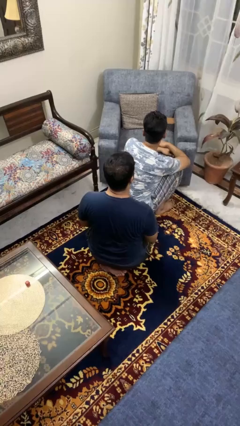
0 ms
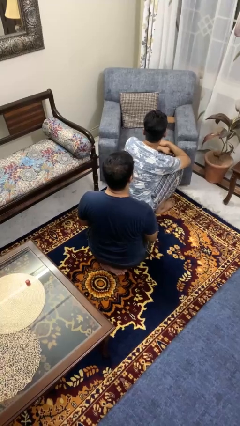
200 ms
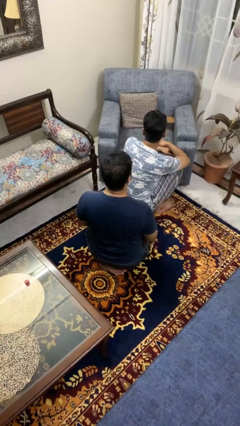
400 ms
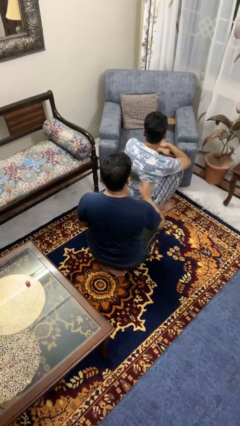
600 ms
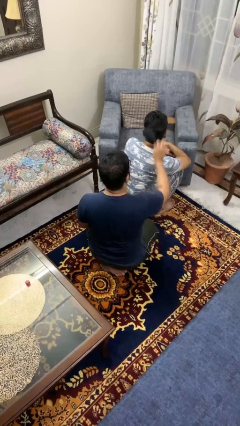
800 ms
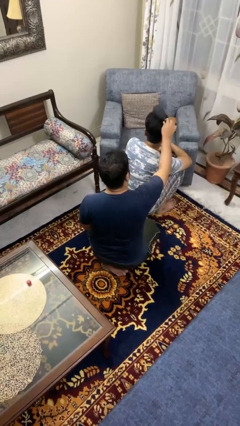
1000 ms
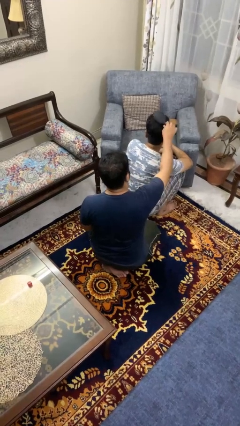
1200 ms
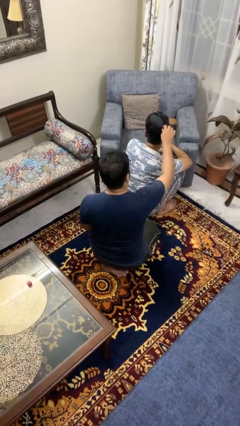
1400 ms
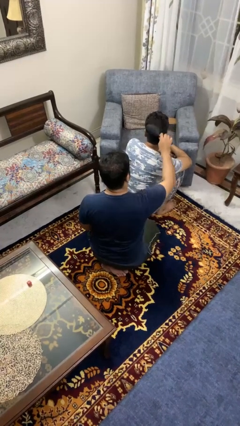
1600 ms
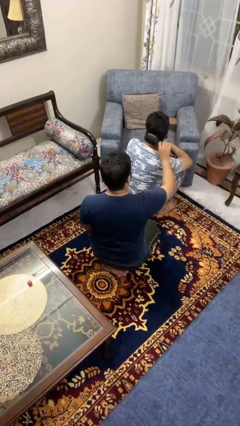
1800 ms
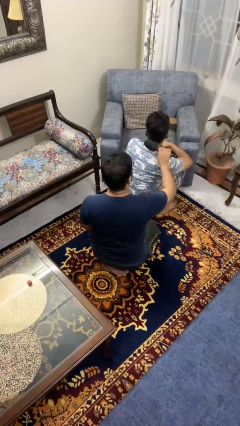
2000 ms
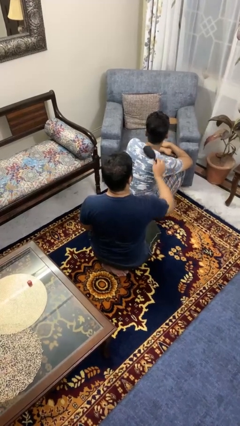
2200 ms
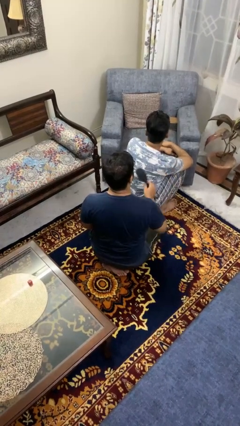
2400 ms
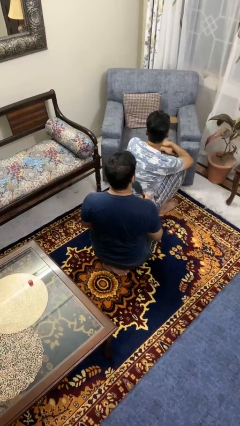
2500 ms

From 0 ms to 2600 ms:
person brushes hair of person

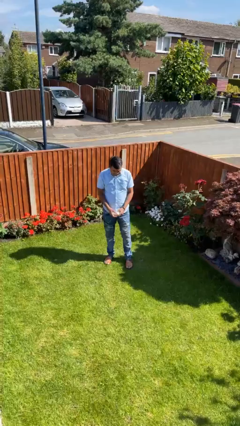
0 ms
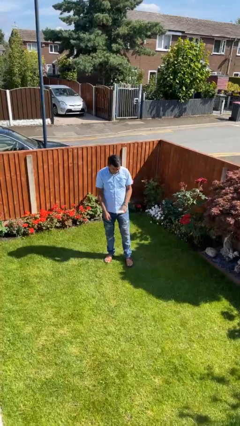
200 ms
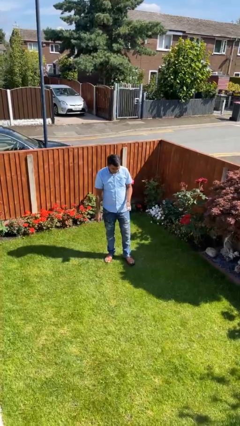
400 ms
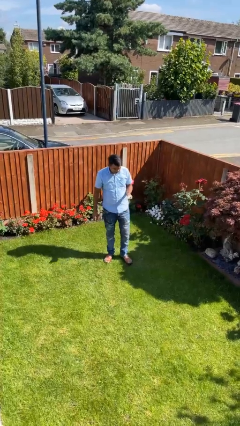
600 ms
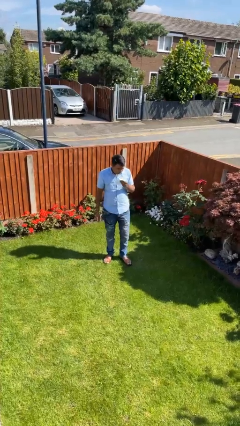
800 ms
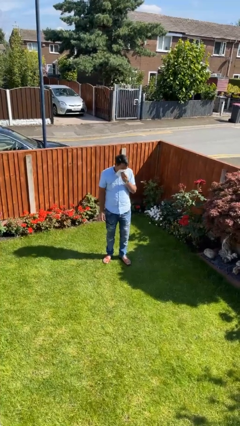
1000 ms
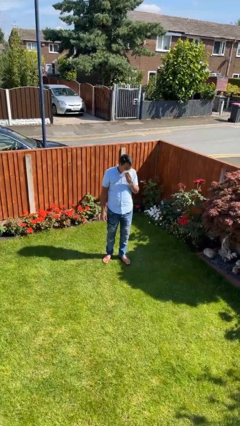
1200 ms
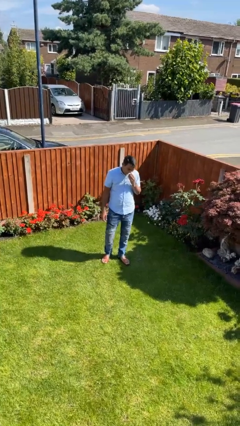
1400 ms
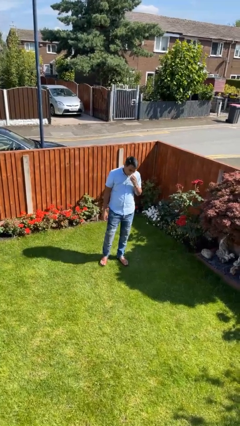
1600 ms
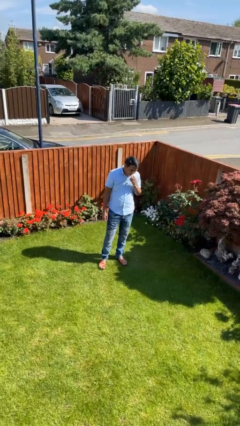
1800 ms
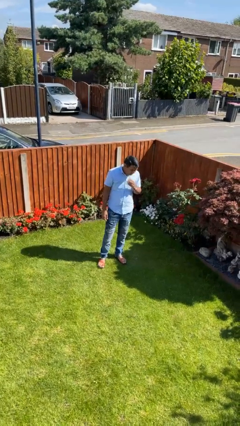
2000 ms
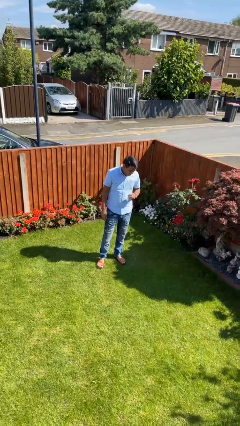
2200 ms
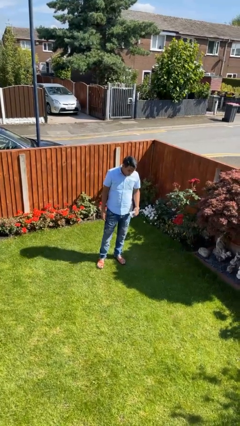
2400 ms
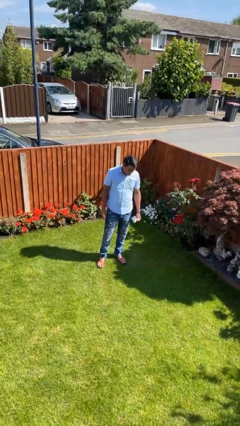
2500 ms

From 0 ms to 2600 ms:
person wipes mouth with napkin

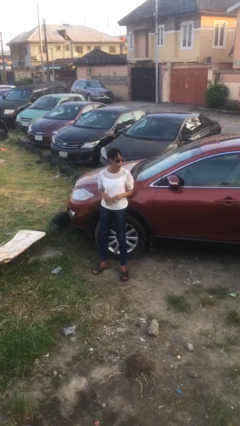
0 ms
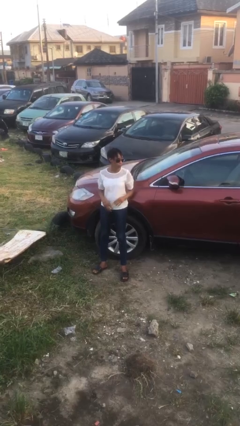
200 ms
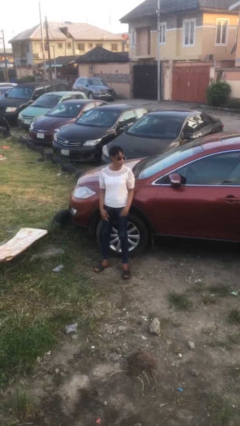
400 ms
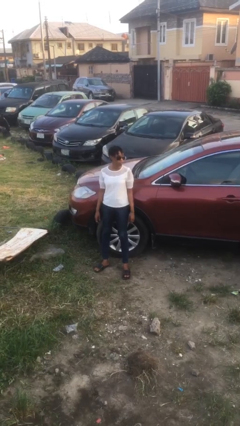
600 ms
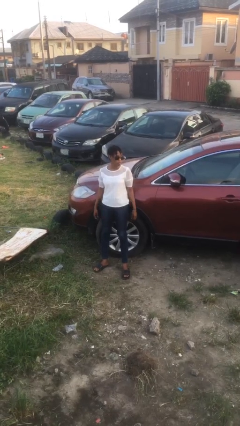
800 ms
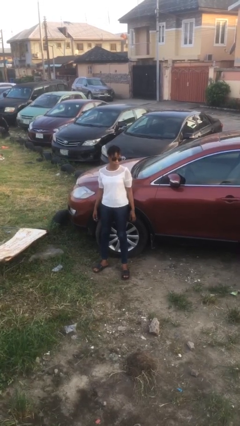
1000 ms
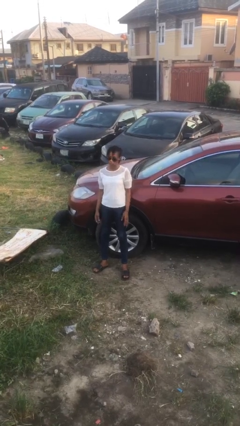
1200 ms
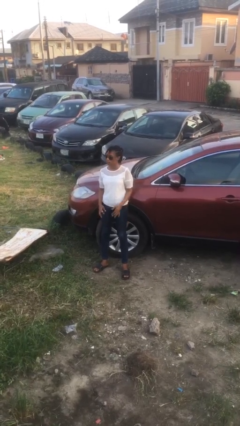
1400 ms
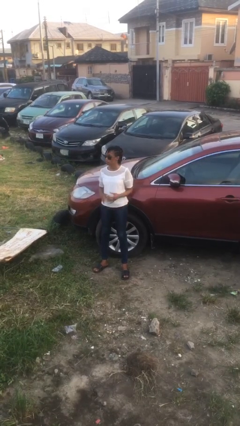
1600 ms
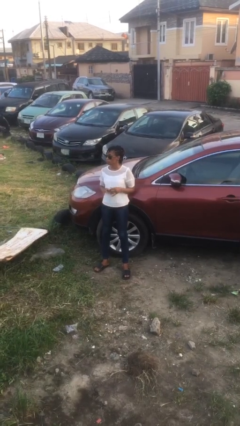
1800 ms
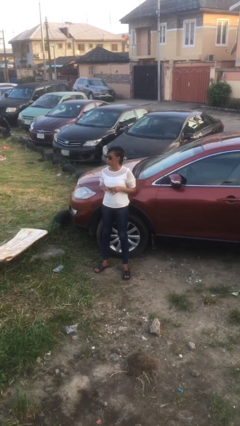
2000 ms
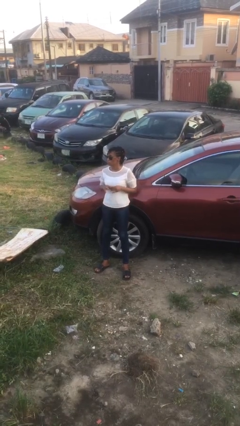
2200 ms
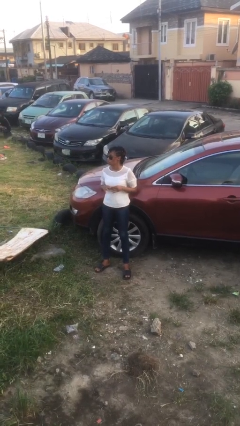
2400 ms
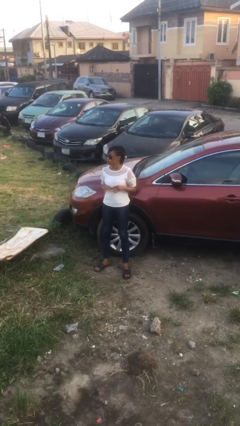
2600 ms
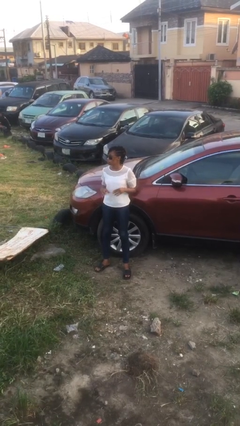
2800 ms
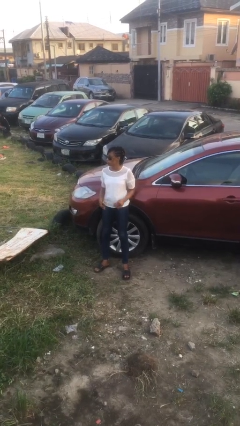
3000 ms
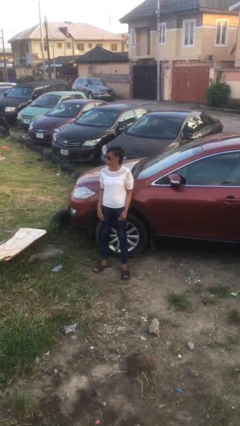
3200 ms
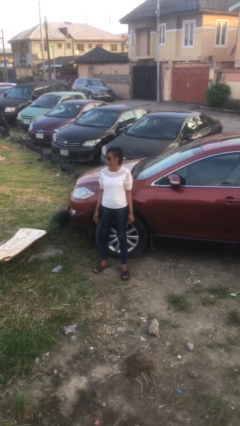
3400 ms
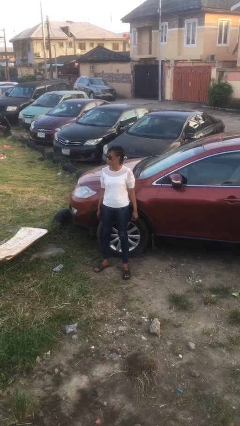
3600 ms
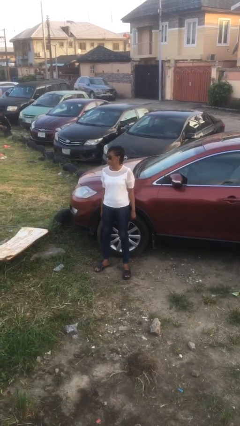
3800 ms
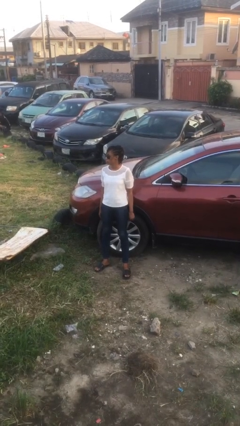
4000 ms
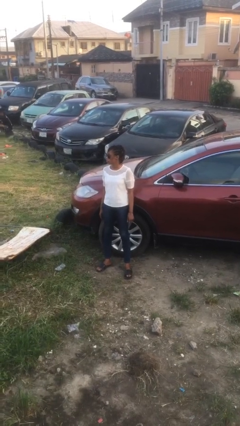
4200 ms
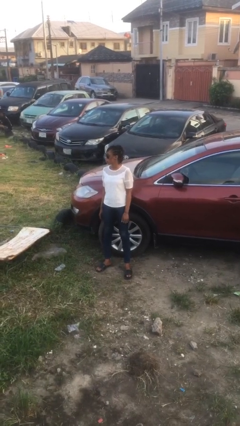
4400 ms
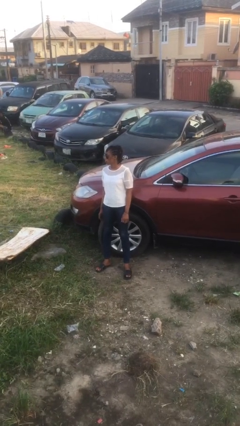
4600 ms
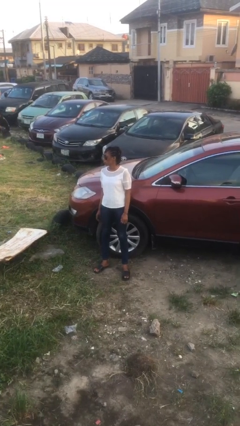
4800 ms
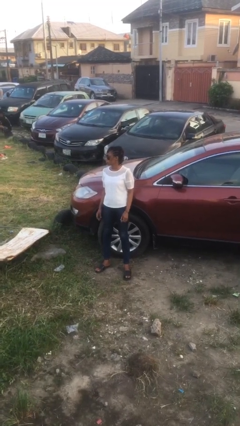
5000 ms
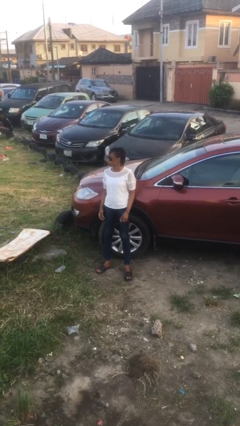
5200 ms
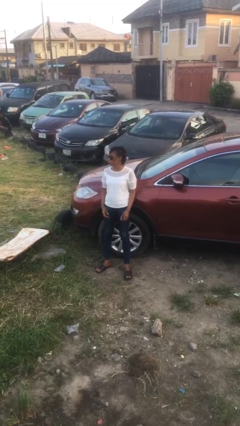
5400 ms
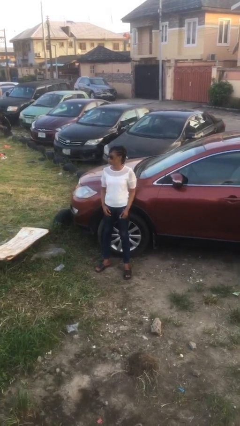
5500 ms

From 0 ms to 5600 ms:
person takes off ring

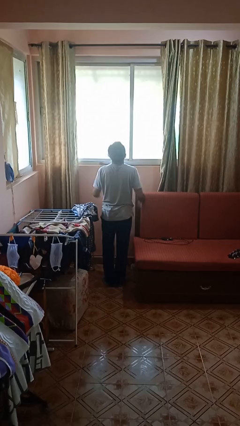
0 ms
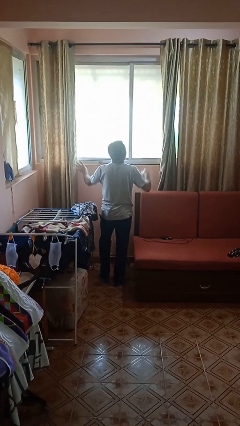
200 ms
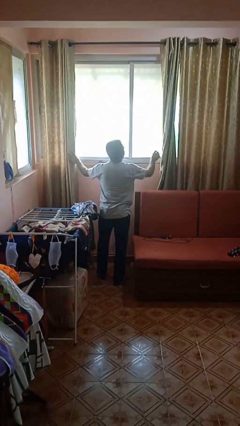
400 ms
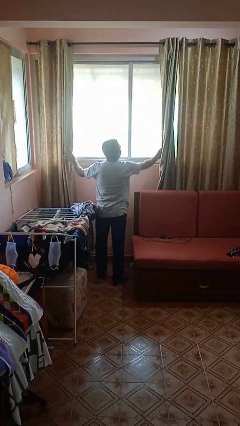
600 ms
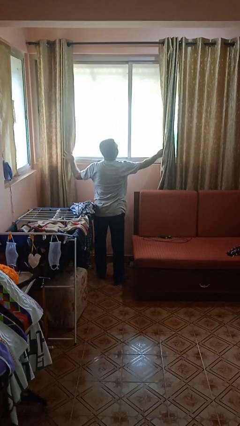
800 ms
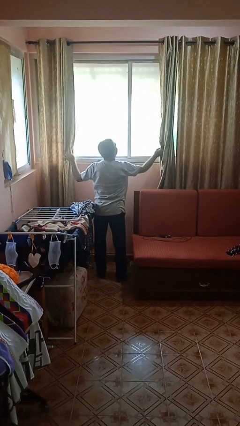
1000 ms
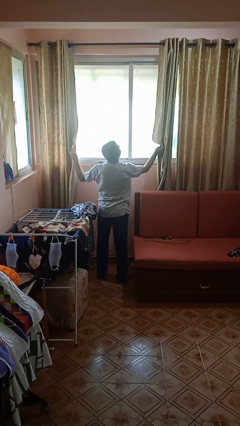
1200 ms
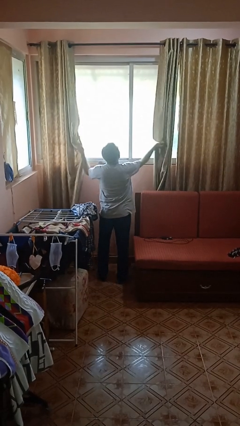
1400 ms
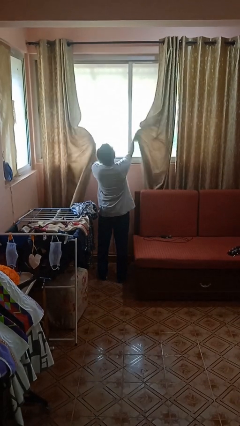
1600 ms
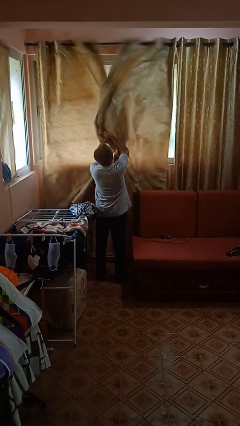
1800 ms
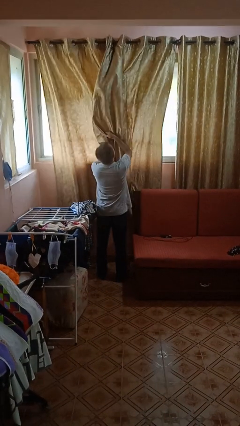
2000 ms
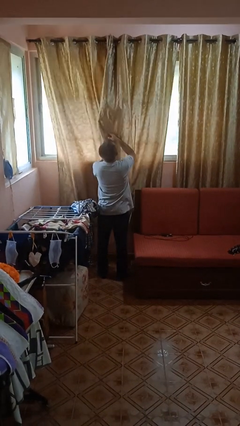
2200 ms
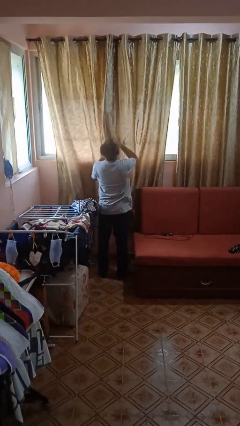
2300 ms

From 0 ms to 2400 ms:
person closes curtains

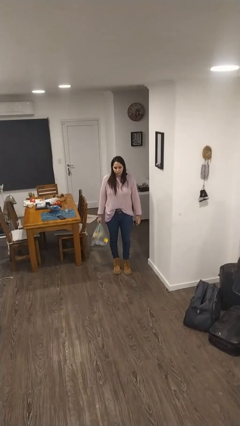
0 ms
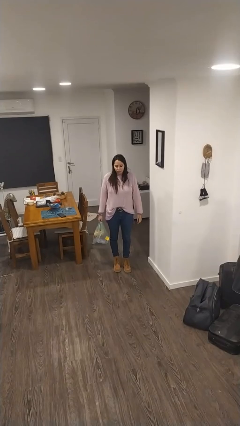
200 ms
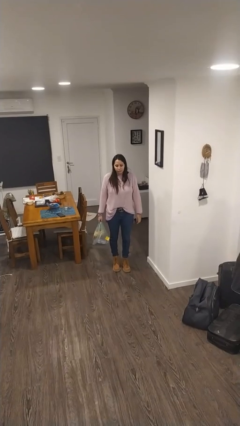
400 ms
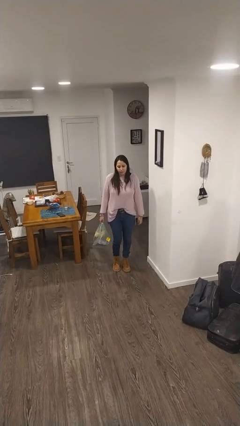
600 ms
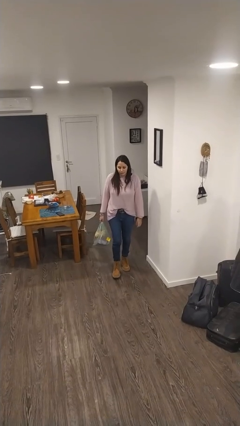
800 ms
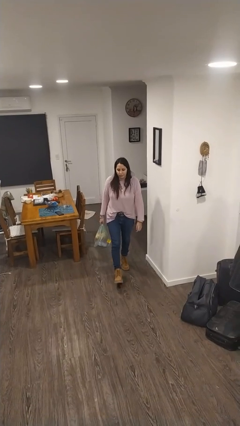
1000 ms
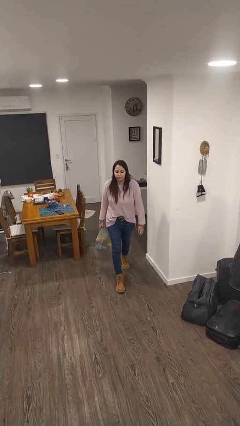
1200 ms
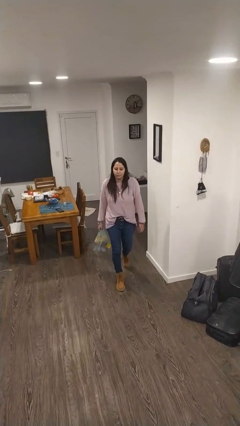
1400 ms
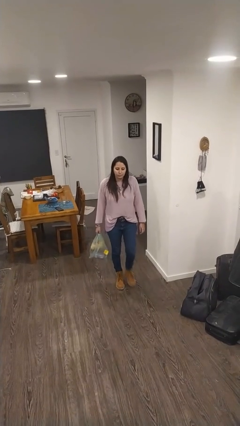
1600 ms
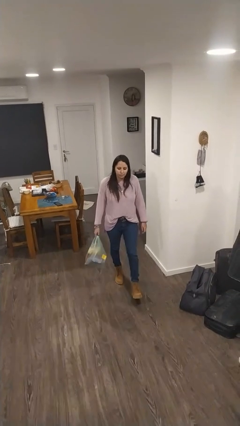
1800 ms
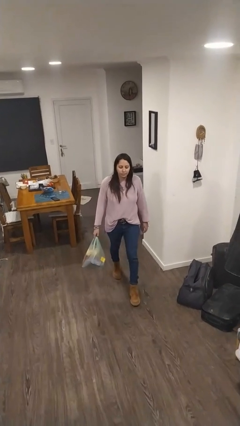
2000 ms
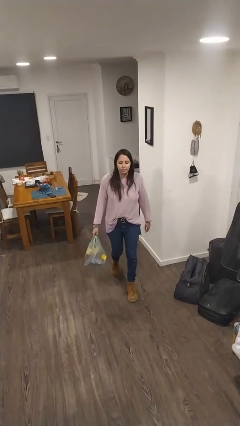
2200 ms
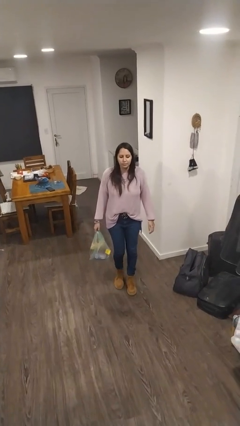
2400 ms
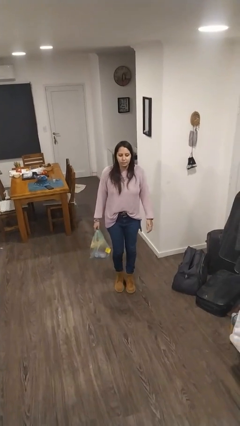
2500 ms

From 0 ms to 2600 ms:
person carries groceries

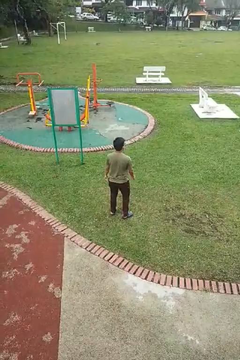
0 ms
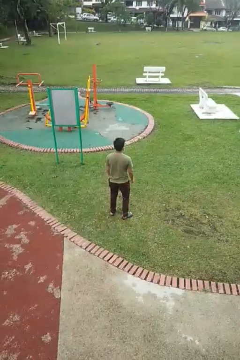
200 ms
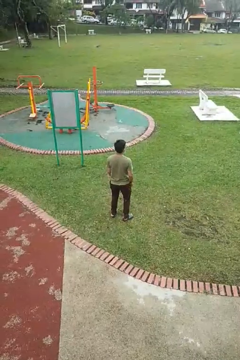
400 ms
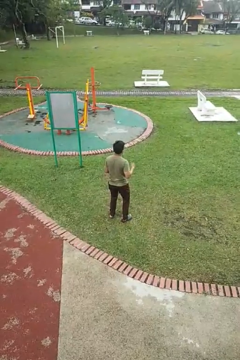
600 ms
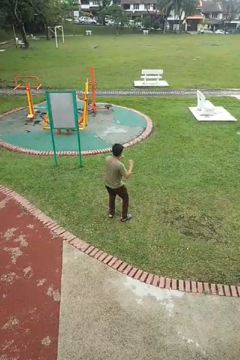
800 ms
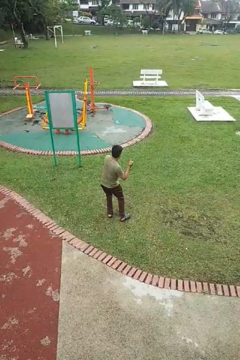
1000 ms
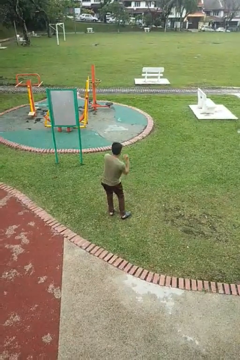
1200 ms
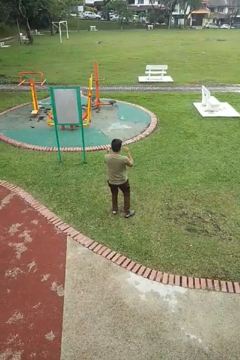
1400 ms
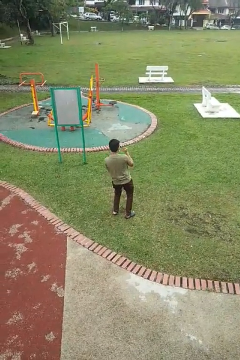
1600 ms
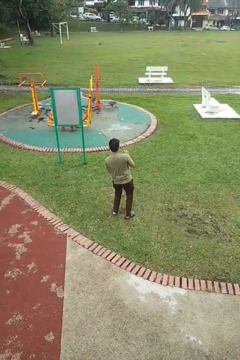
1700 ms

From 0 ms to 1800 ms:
person dances in place

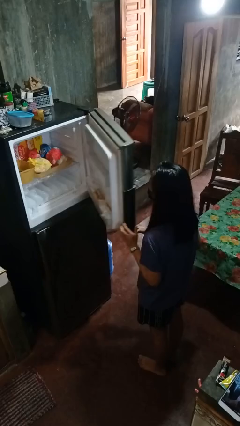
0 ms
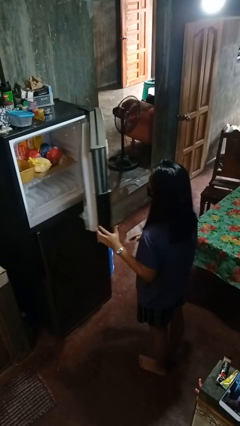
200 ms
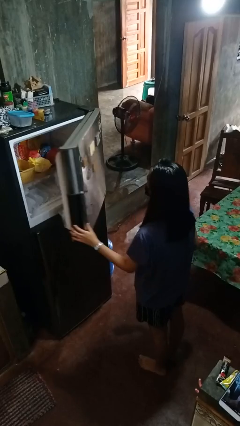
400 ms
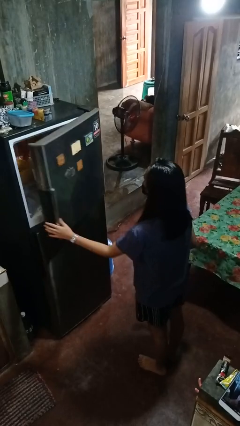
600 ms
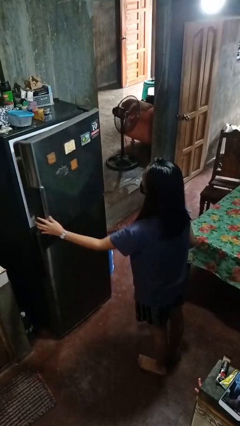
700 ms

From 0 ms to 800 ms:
person closes refrigerator
